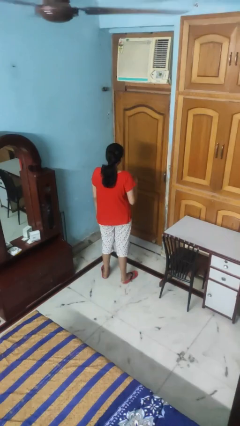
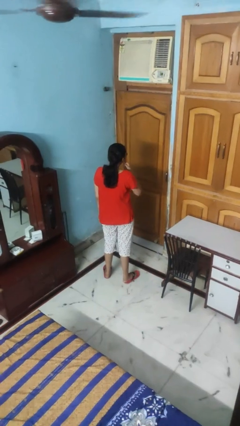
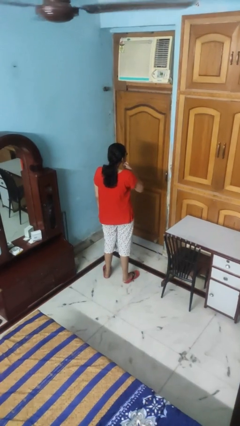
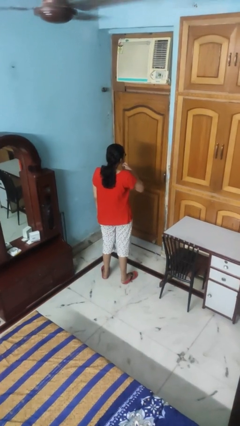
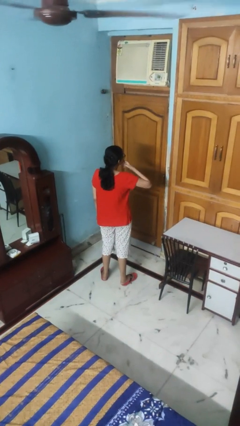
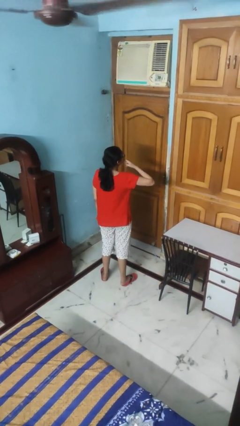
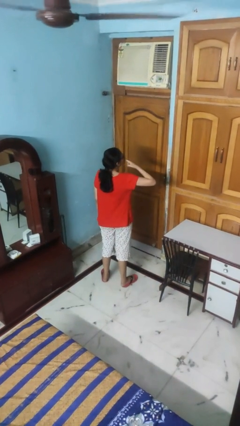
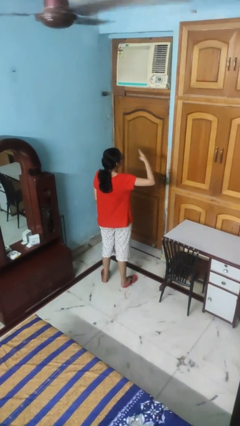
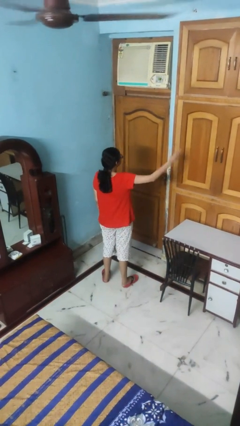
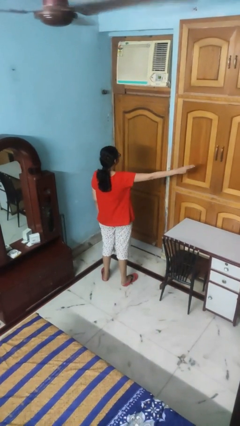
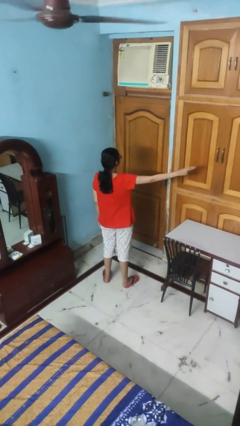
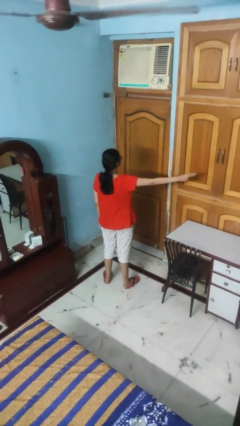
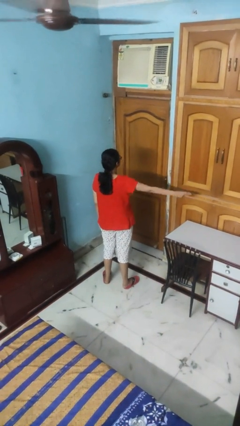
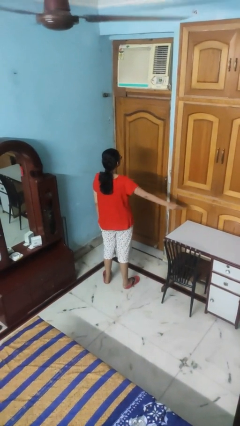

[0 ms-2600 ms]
person gestures blow kiss

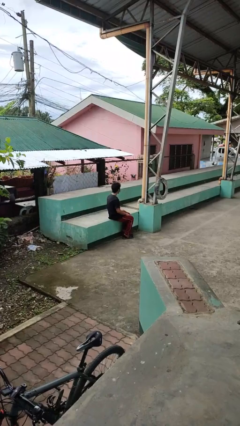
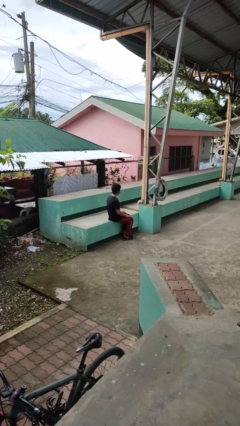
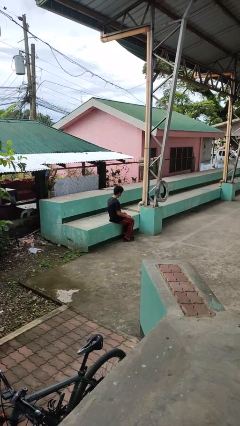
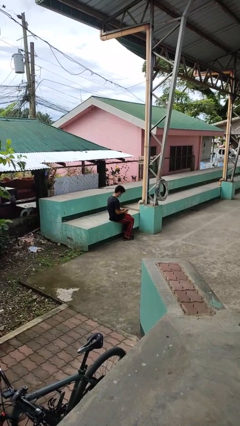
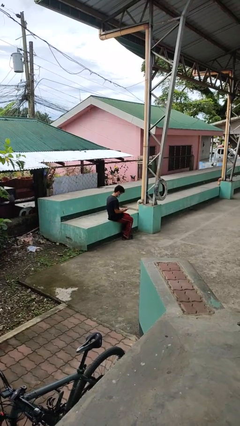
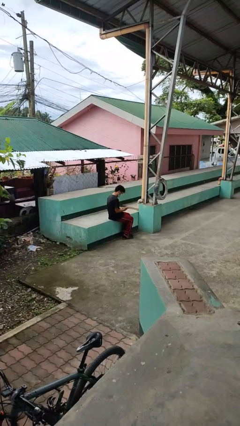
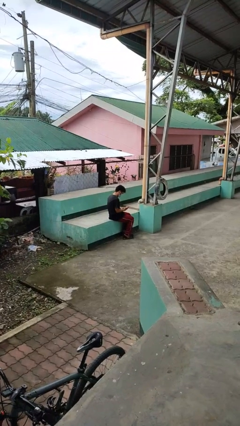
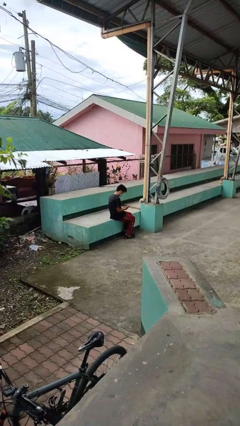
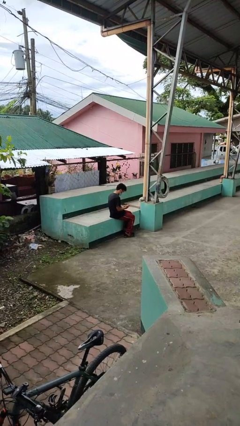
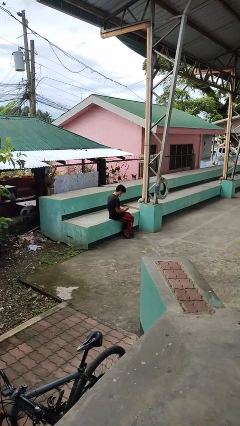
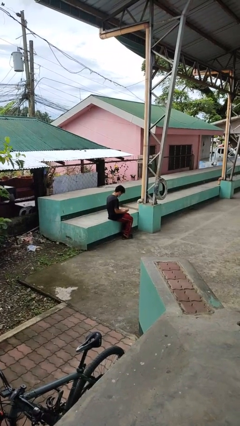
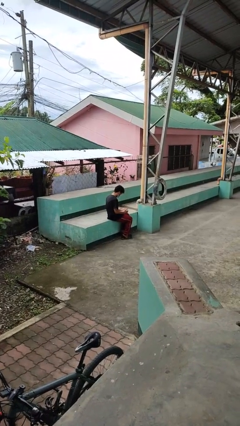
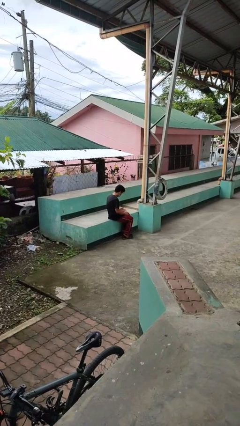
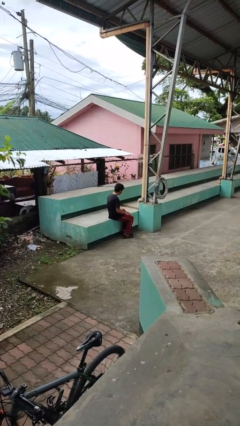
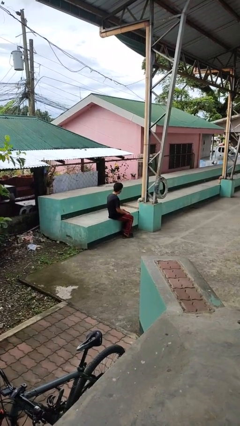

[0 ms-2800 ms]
person looks at hands in lap

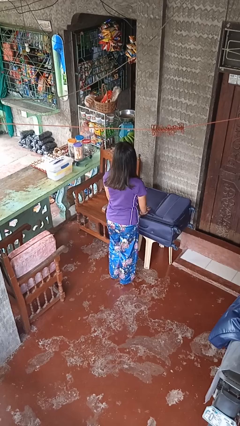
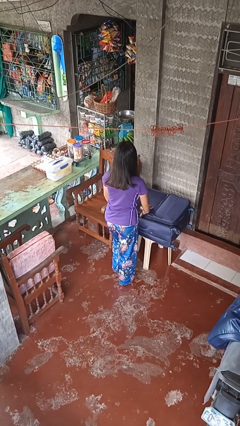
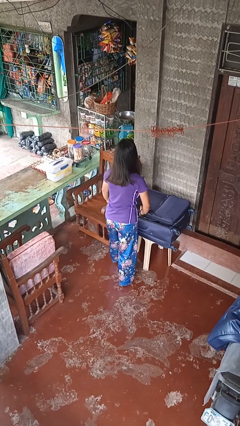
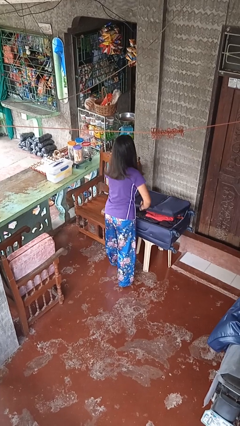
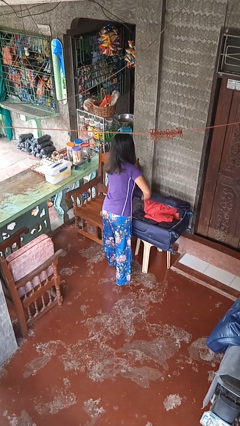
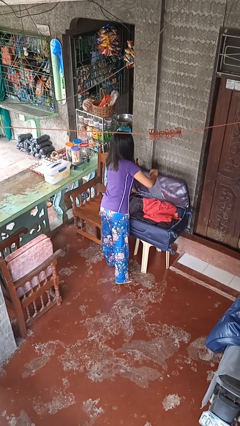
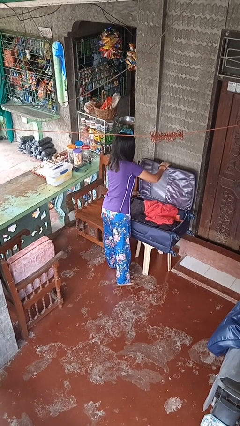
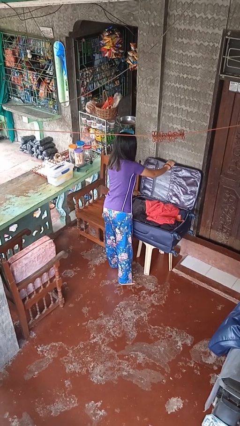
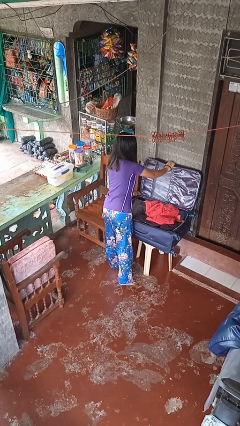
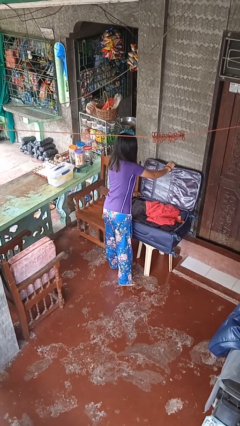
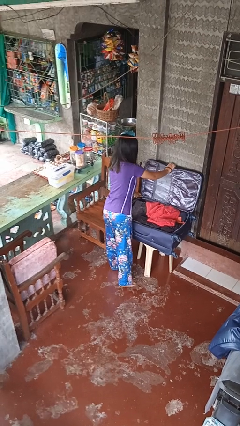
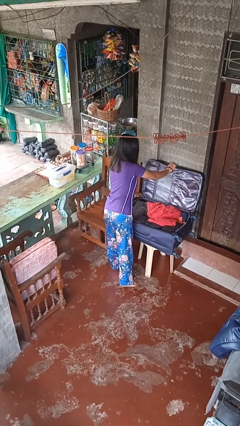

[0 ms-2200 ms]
person opens suitcase

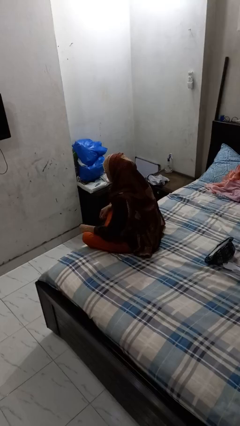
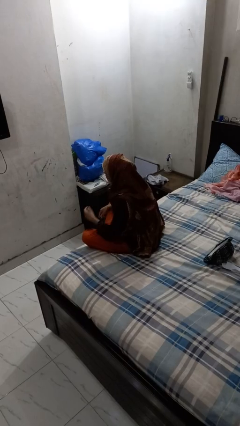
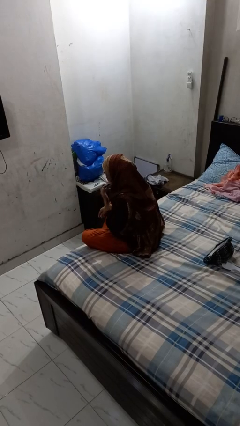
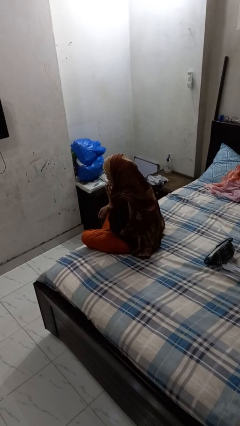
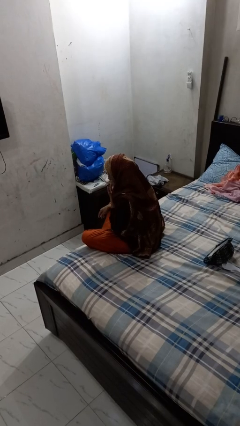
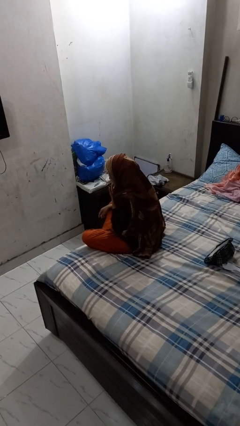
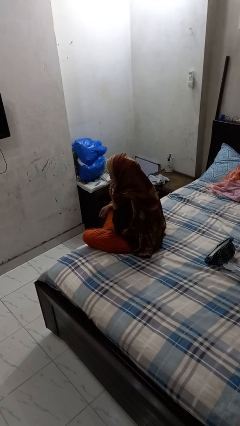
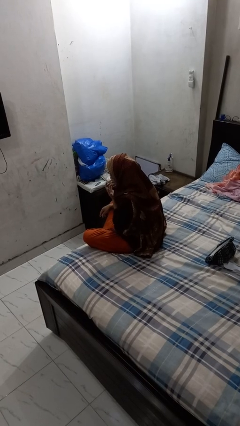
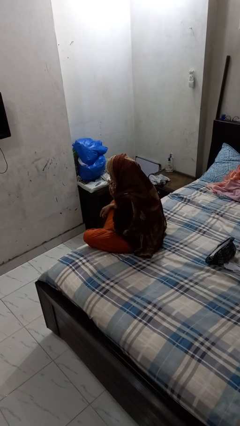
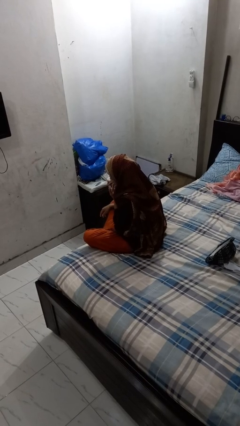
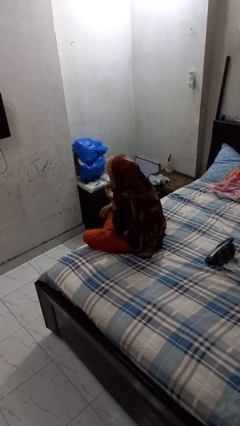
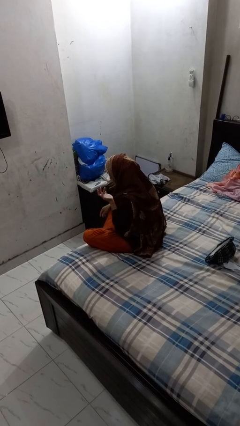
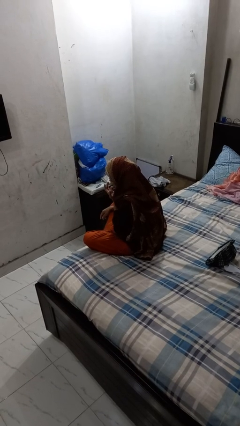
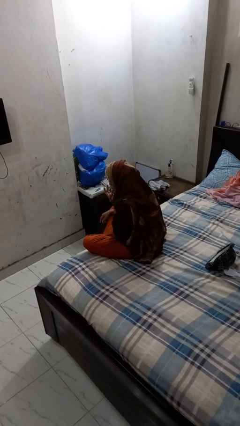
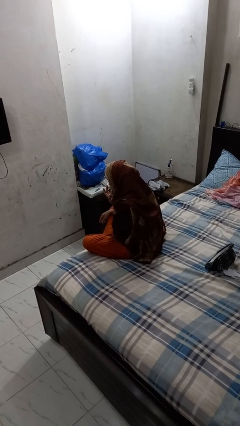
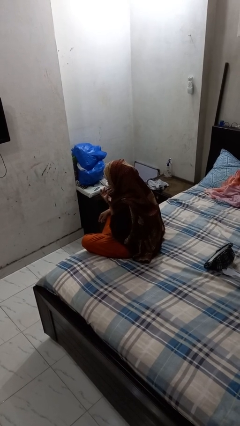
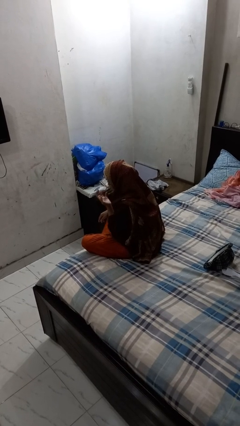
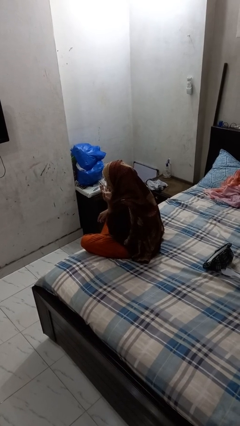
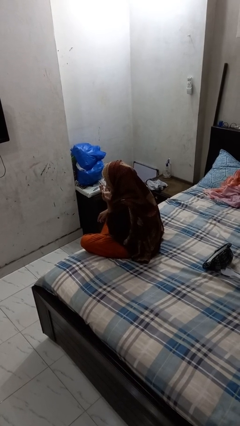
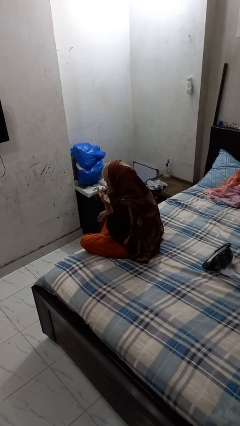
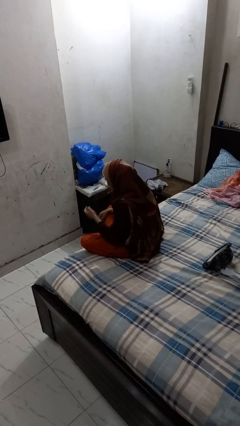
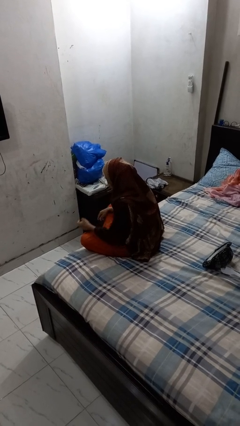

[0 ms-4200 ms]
person licks fingers

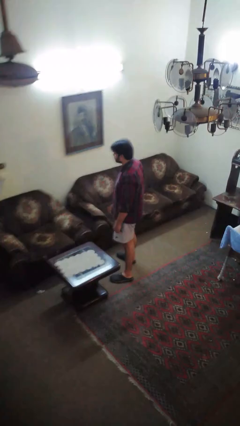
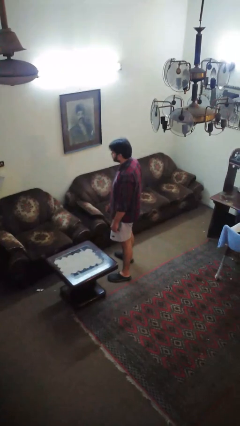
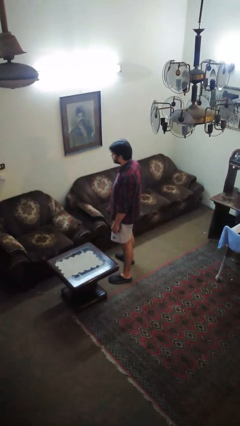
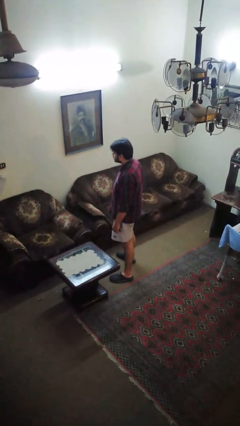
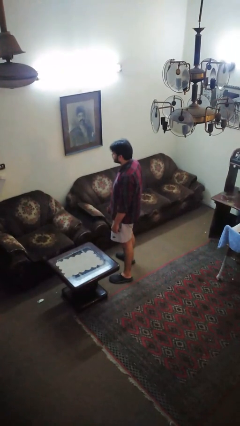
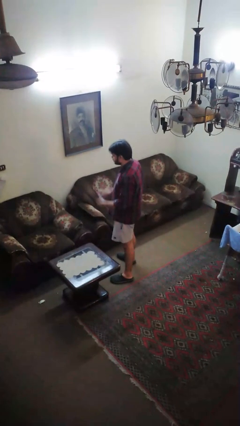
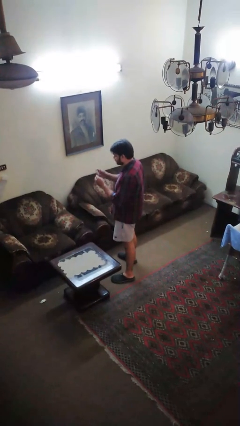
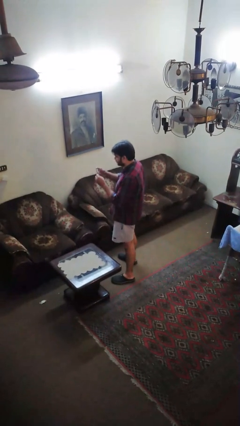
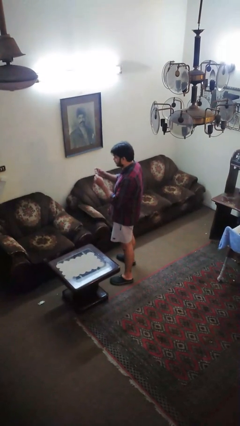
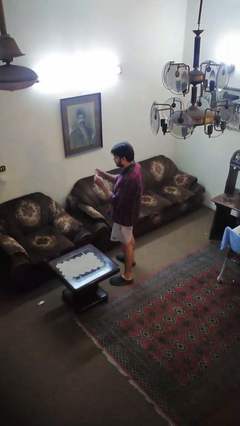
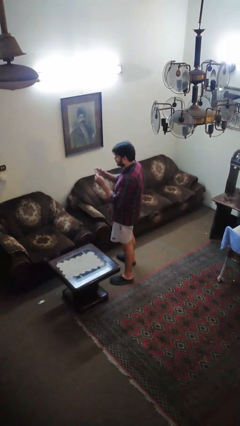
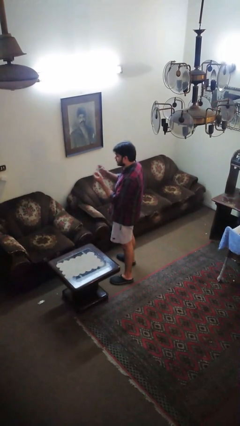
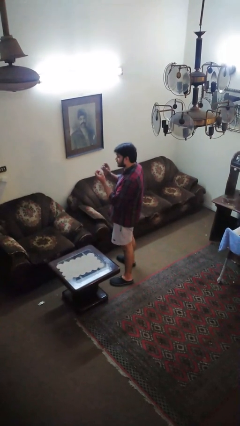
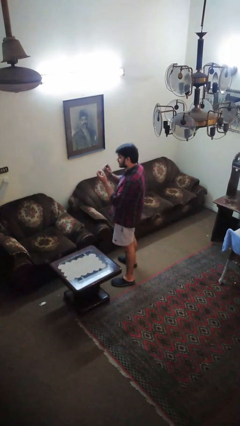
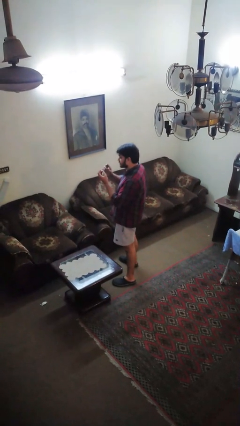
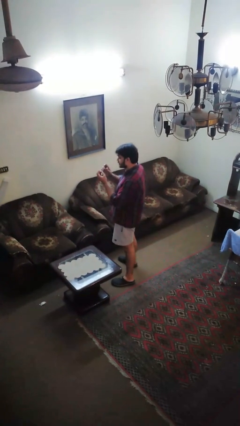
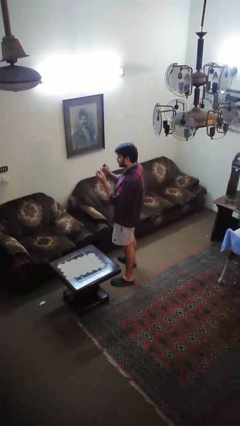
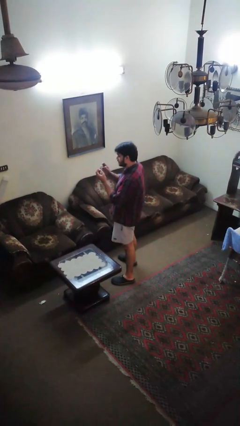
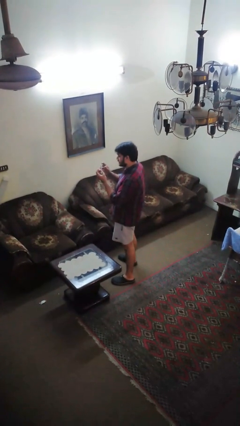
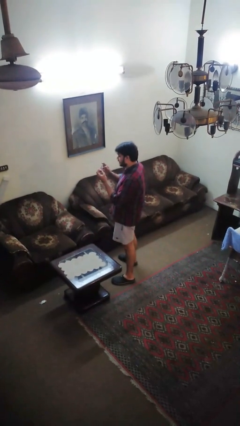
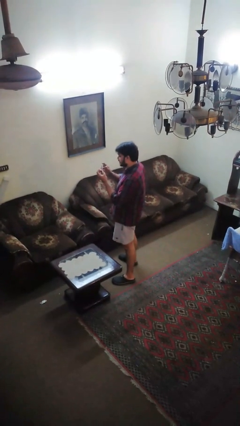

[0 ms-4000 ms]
person clips fingernails

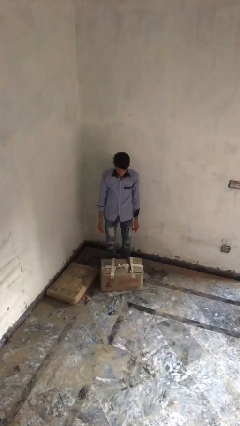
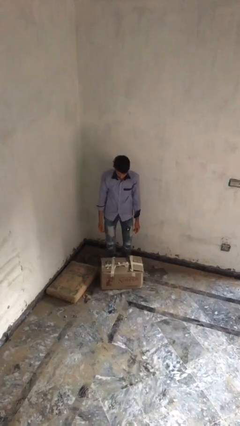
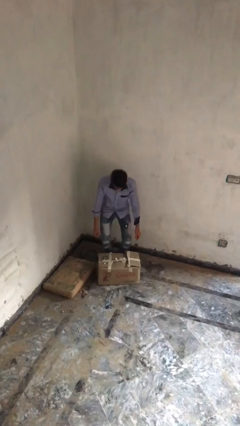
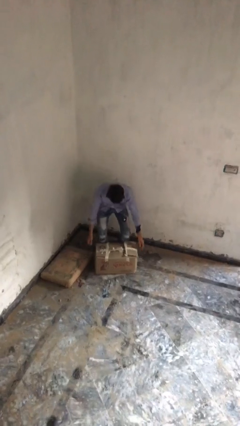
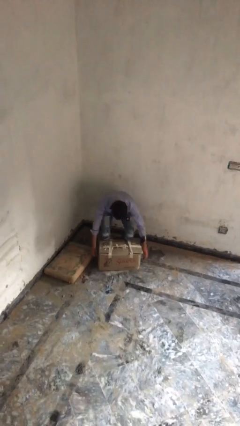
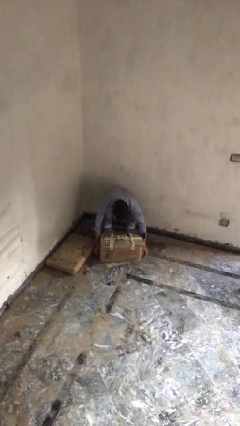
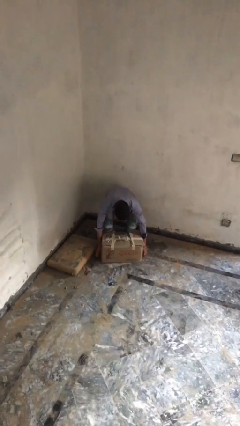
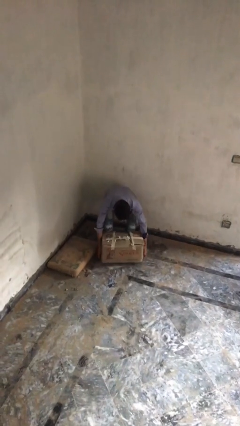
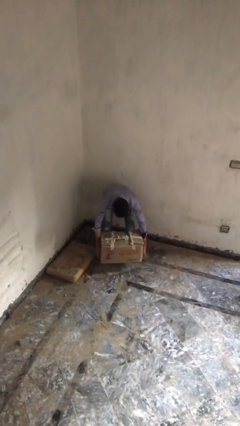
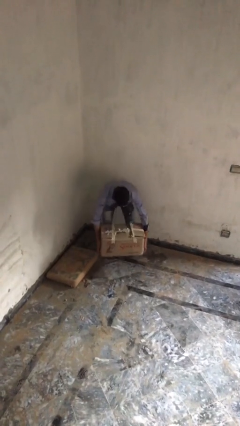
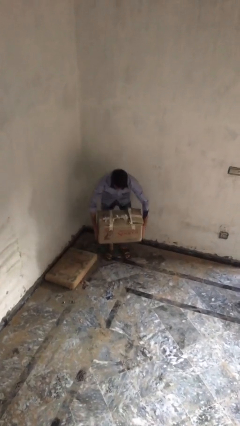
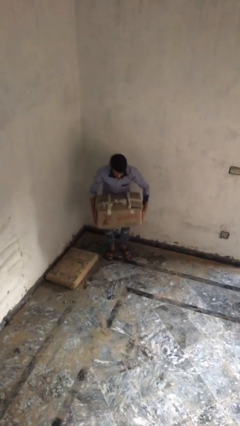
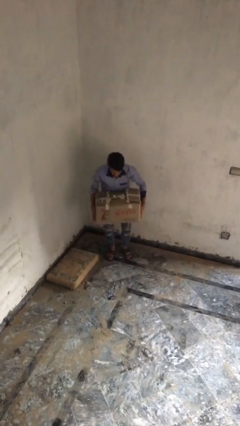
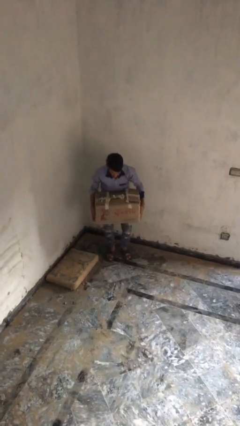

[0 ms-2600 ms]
person picks up object from floor
